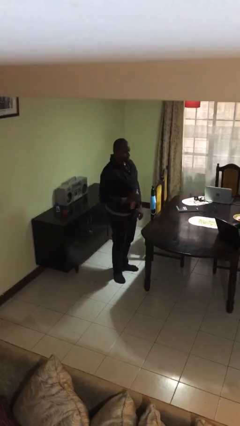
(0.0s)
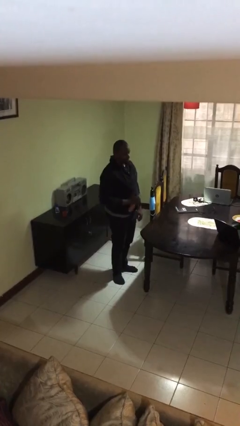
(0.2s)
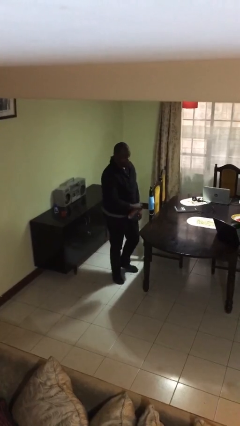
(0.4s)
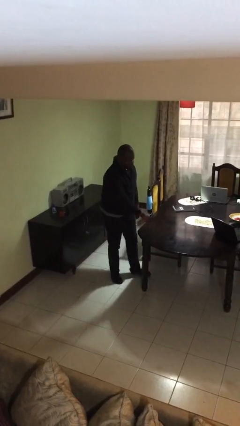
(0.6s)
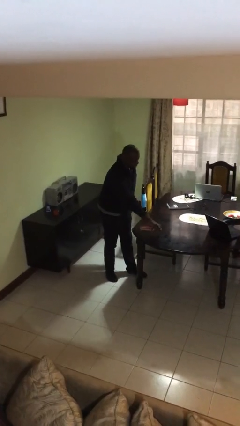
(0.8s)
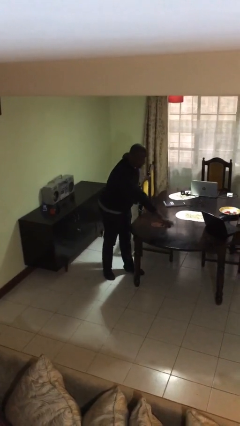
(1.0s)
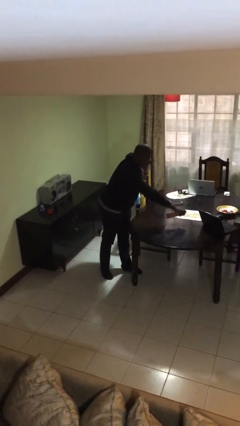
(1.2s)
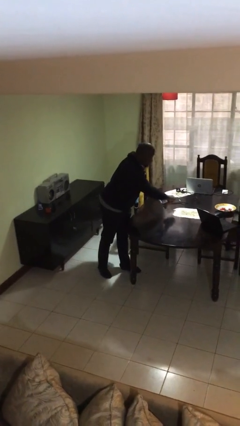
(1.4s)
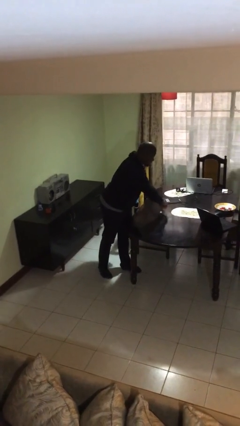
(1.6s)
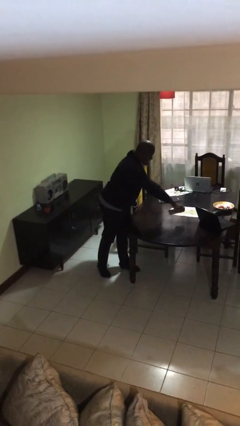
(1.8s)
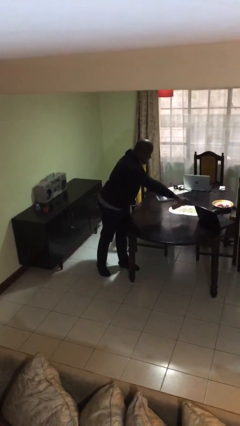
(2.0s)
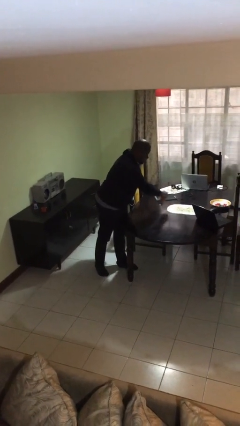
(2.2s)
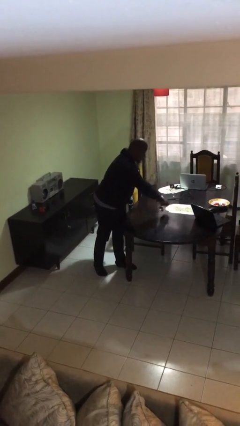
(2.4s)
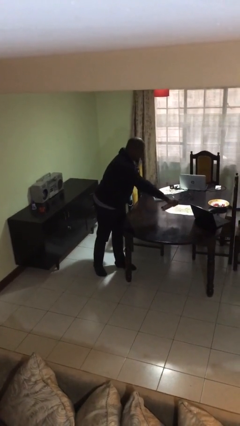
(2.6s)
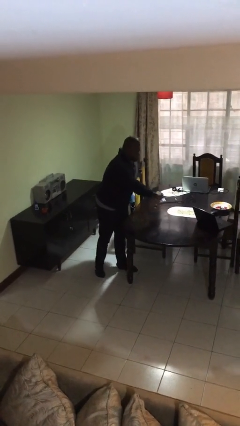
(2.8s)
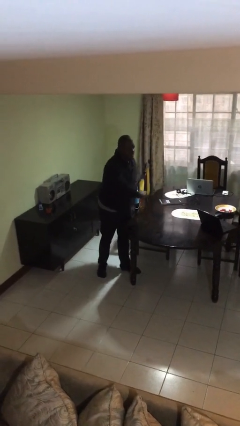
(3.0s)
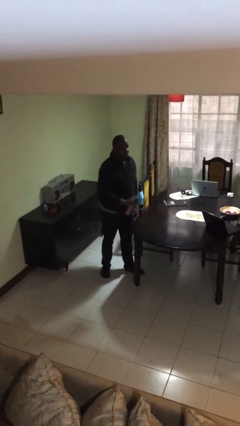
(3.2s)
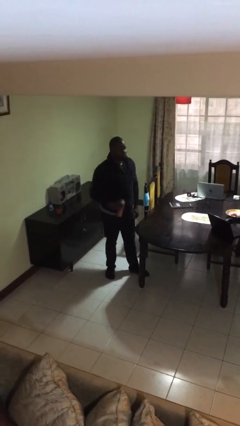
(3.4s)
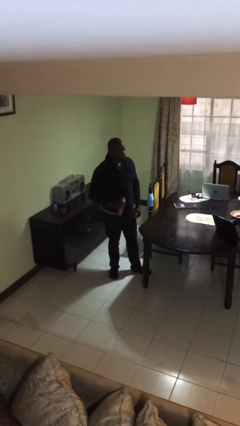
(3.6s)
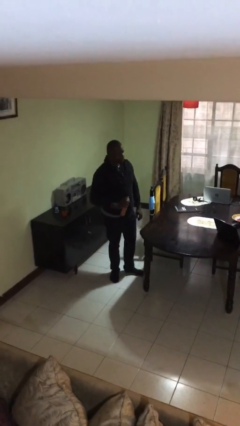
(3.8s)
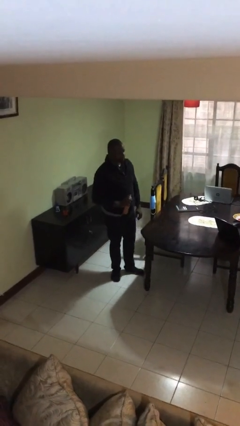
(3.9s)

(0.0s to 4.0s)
person sprays from bottle

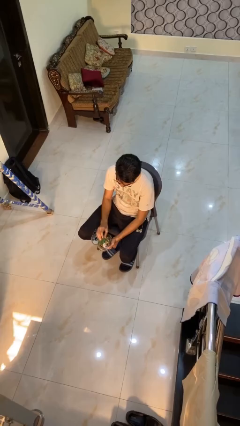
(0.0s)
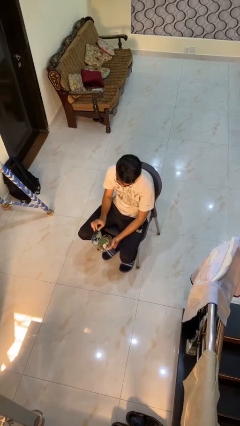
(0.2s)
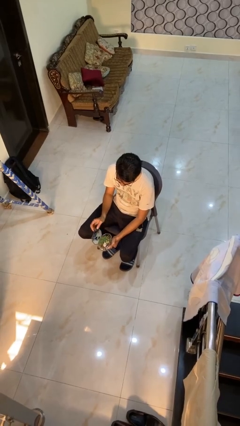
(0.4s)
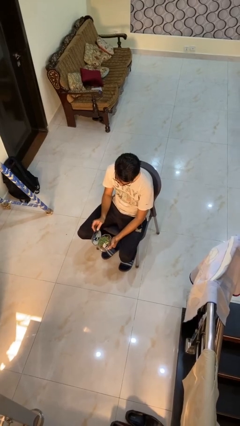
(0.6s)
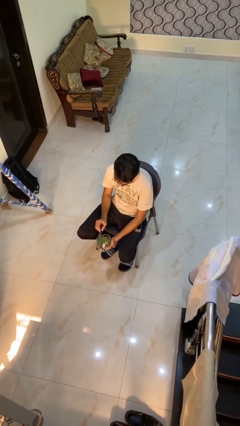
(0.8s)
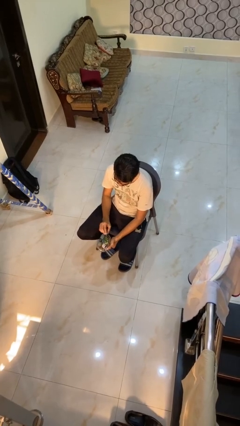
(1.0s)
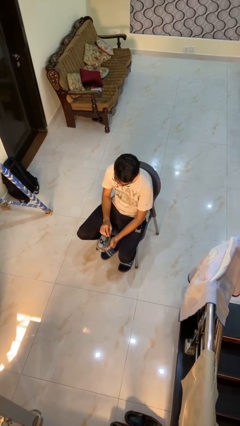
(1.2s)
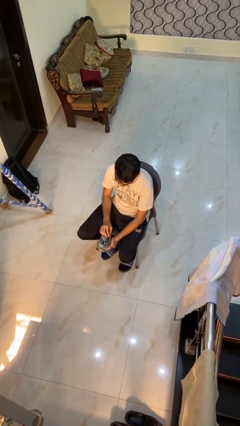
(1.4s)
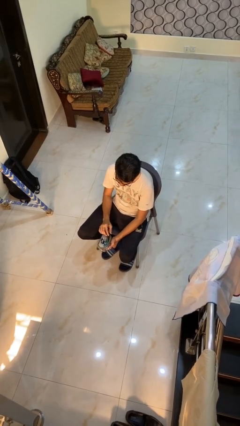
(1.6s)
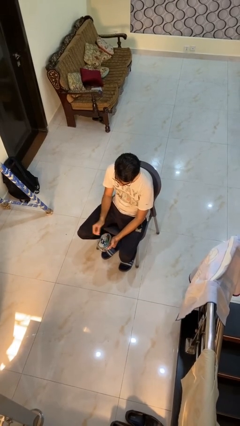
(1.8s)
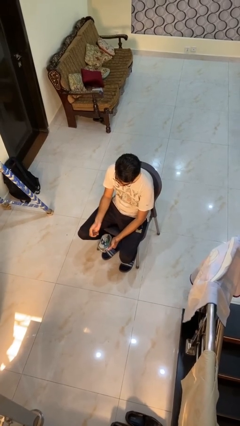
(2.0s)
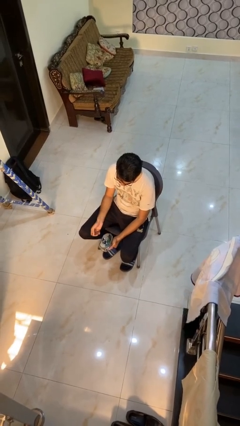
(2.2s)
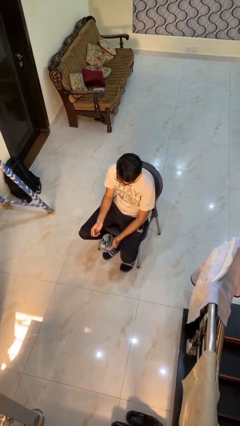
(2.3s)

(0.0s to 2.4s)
person closes jewelry box

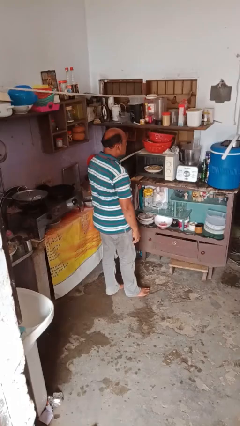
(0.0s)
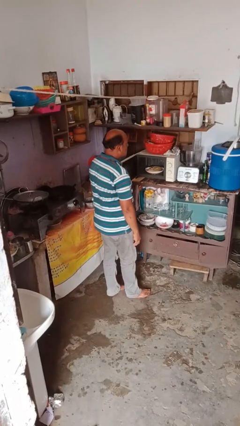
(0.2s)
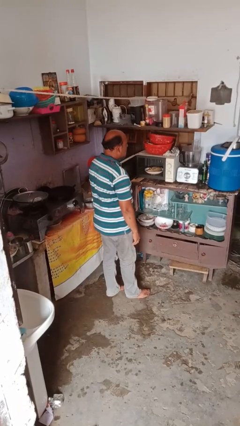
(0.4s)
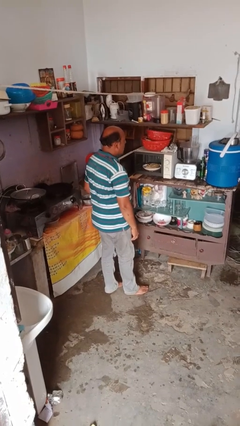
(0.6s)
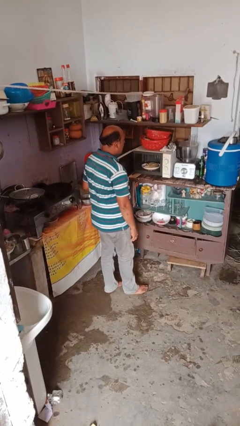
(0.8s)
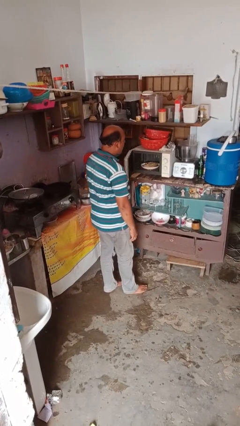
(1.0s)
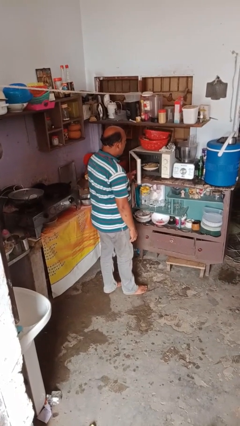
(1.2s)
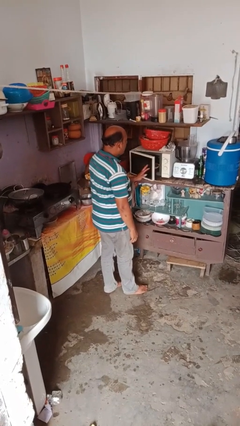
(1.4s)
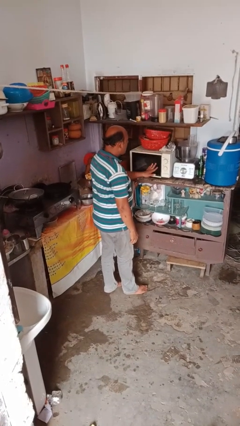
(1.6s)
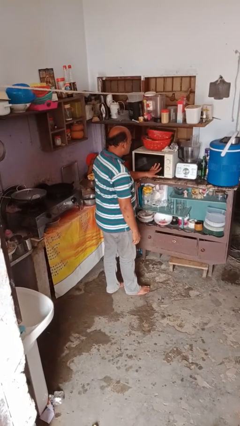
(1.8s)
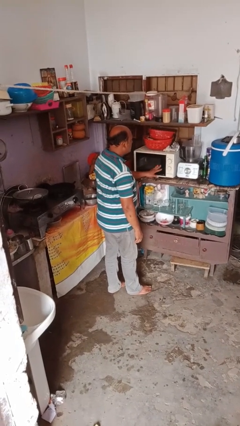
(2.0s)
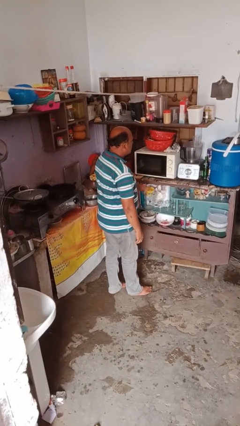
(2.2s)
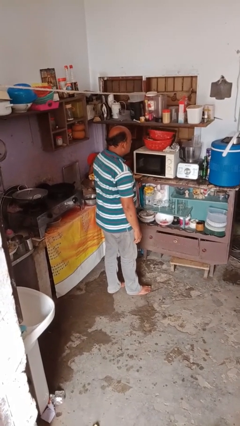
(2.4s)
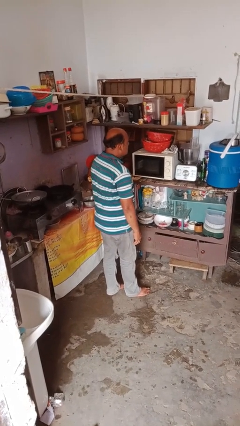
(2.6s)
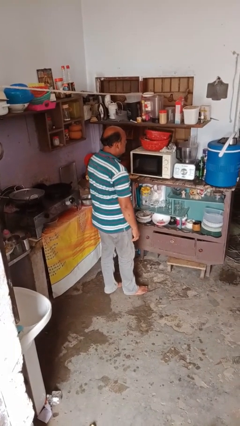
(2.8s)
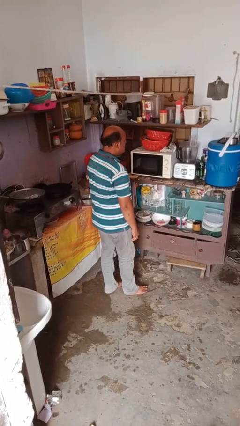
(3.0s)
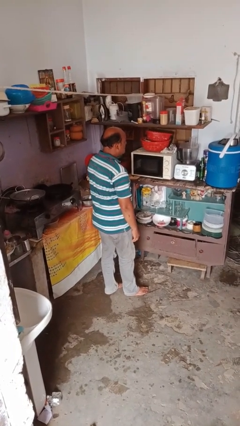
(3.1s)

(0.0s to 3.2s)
person closes microwave

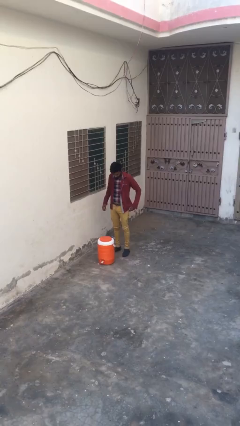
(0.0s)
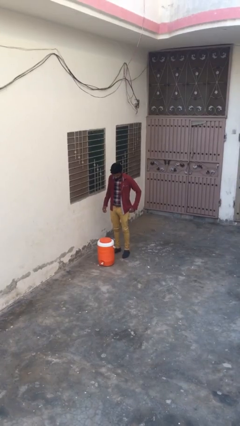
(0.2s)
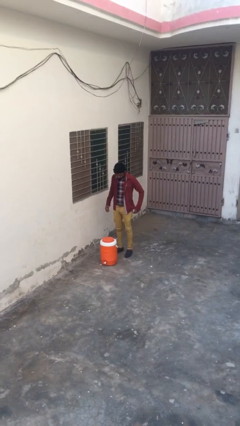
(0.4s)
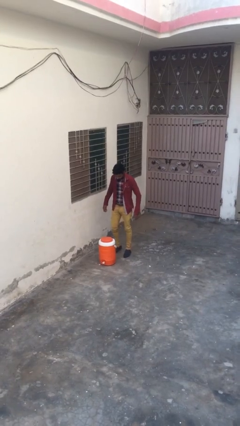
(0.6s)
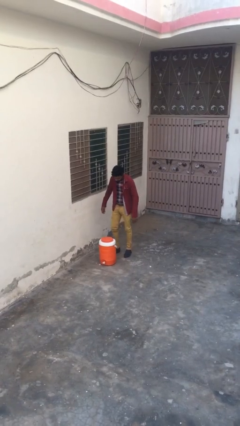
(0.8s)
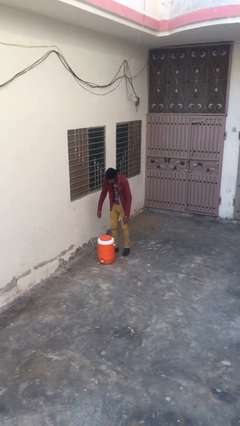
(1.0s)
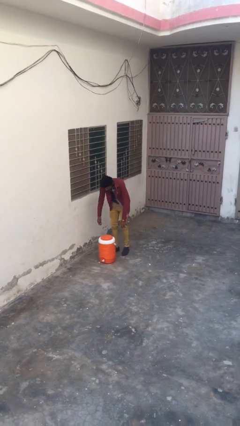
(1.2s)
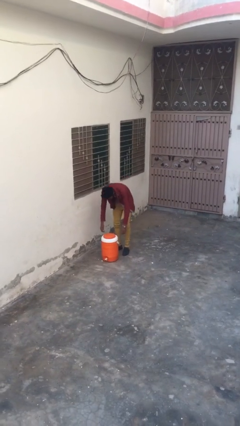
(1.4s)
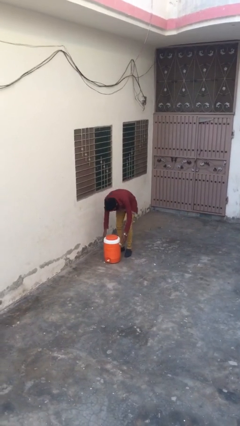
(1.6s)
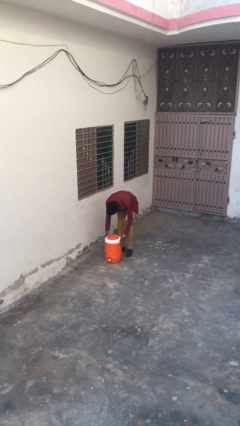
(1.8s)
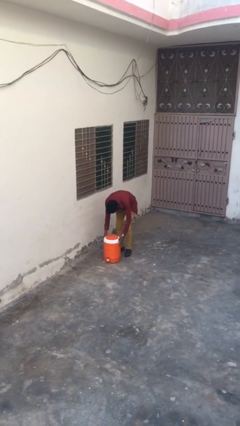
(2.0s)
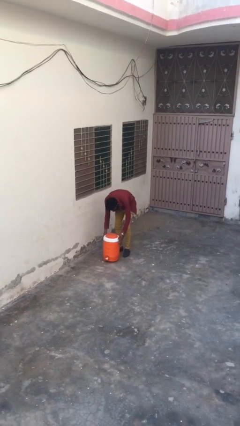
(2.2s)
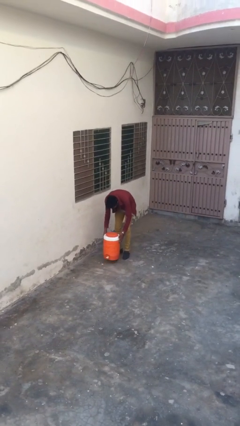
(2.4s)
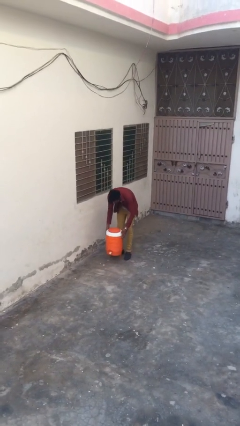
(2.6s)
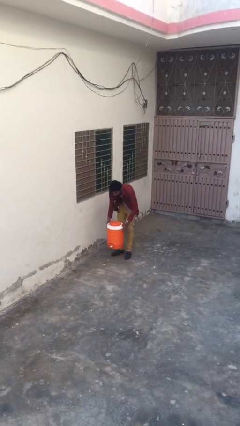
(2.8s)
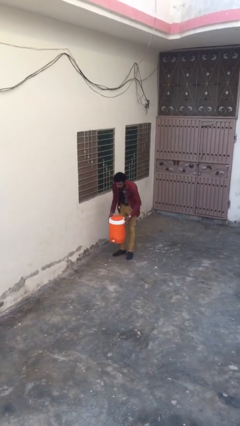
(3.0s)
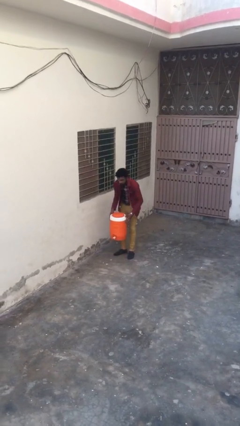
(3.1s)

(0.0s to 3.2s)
person picks up object from floor

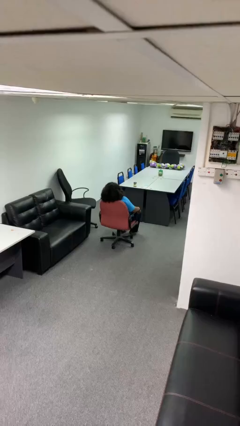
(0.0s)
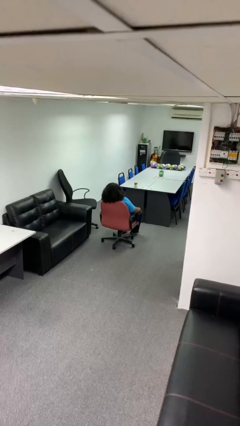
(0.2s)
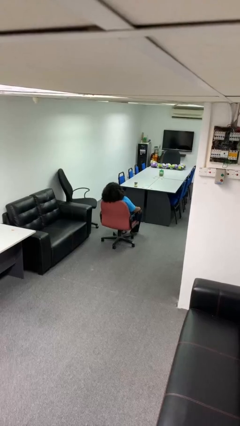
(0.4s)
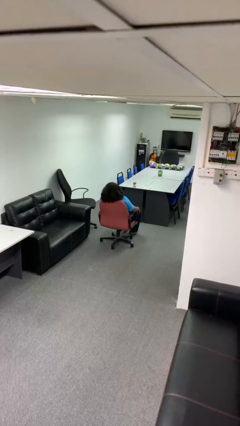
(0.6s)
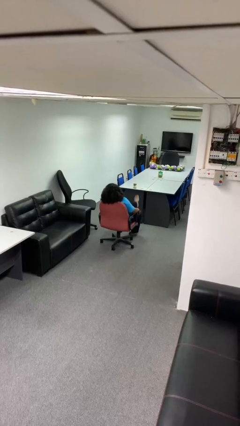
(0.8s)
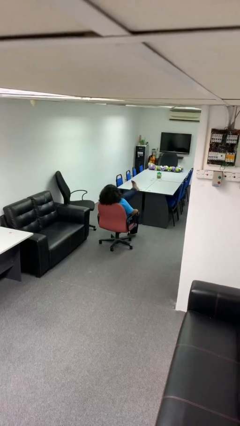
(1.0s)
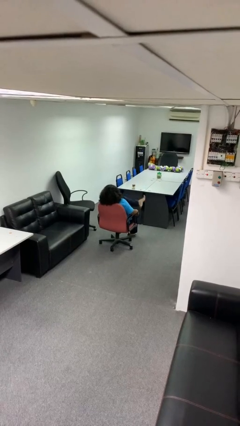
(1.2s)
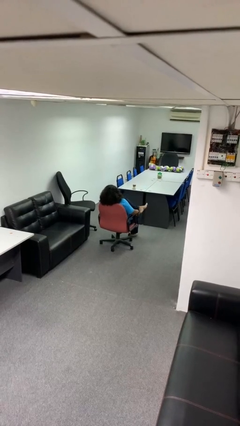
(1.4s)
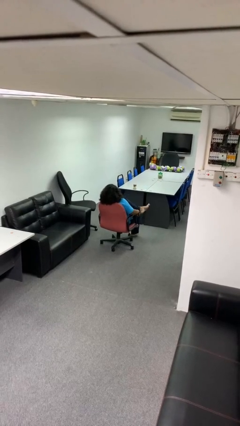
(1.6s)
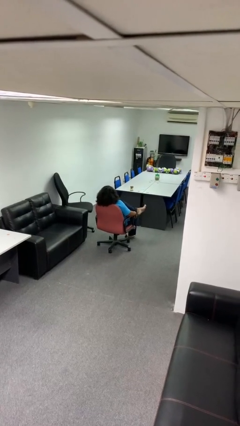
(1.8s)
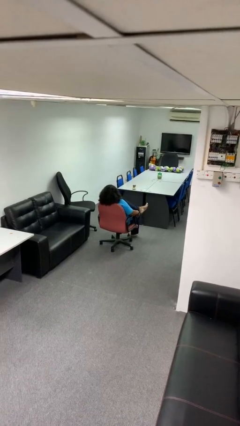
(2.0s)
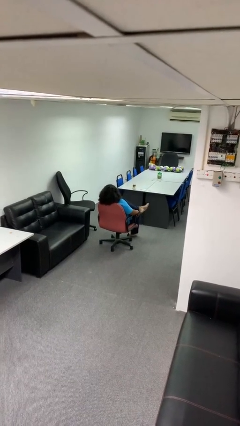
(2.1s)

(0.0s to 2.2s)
person crosses legs

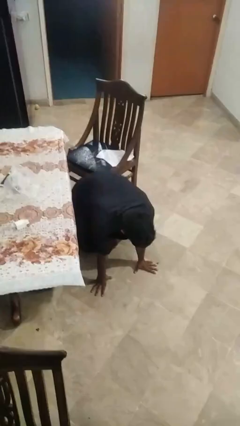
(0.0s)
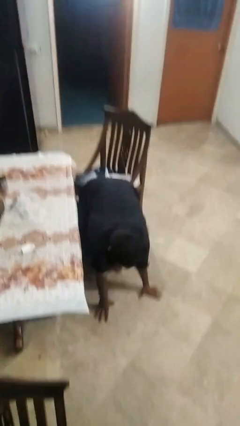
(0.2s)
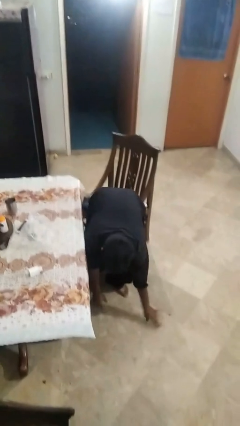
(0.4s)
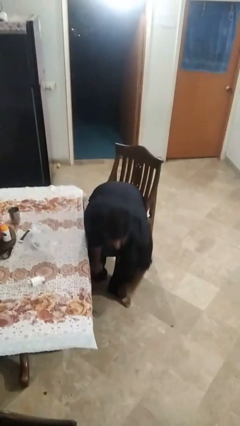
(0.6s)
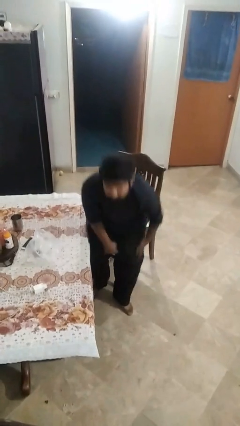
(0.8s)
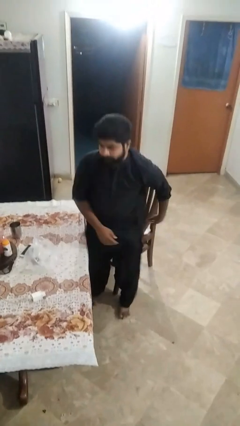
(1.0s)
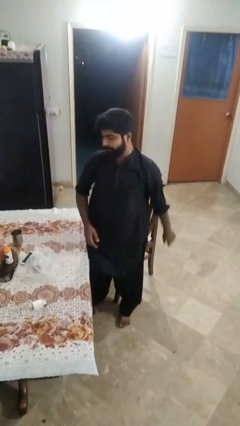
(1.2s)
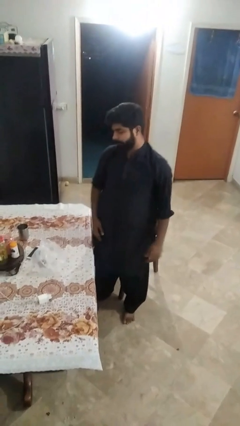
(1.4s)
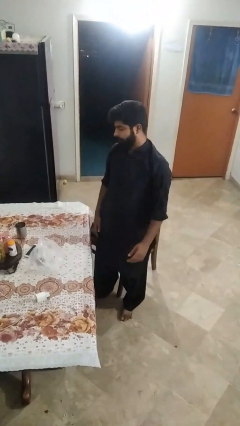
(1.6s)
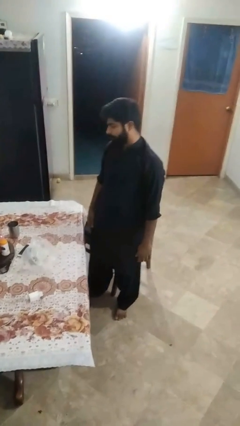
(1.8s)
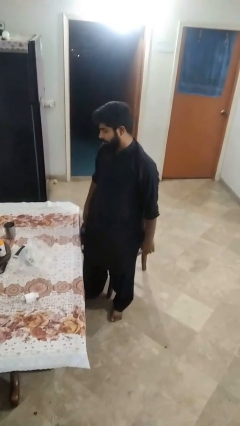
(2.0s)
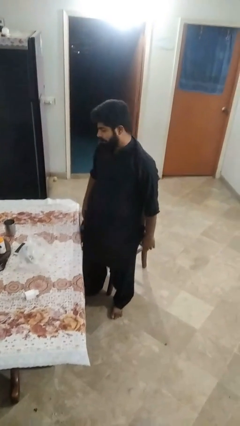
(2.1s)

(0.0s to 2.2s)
person stands up from floor

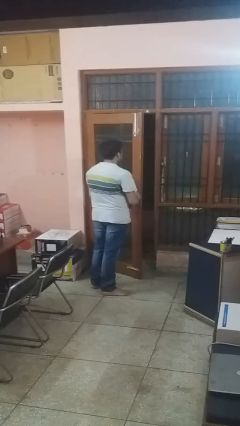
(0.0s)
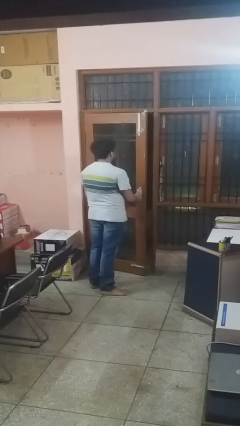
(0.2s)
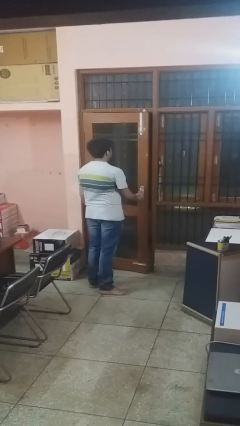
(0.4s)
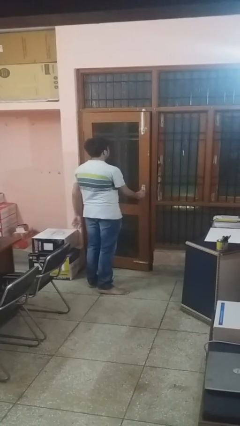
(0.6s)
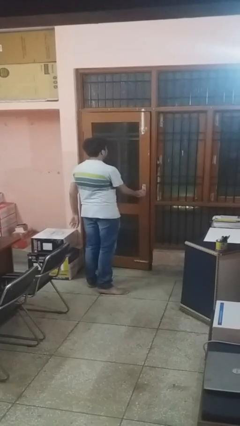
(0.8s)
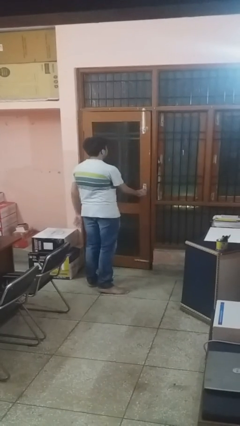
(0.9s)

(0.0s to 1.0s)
person closes facility door
